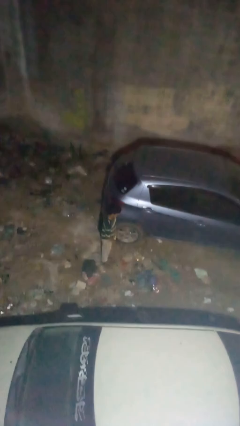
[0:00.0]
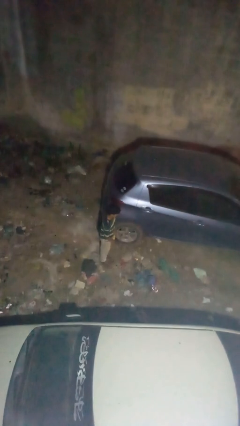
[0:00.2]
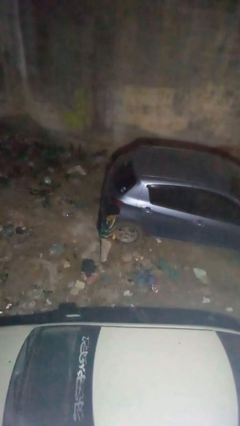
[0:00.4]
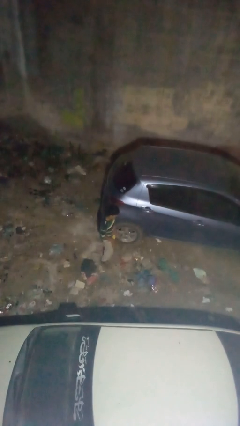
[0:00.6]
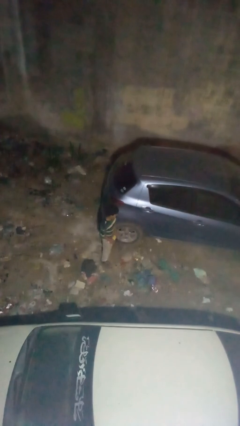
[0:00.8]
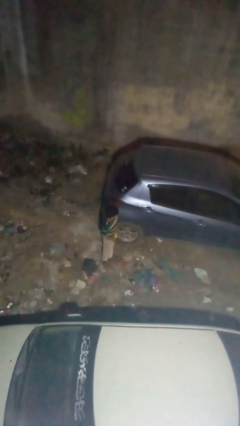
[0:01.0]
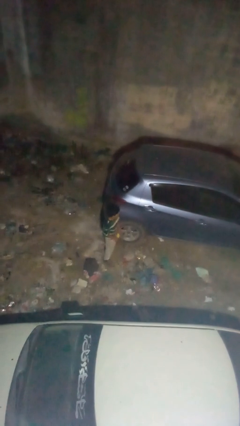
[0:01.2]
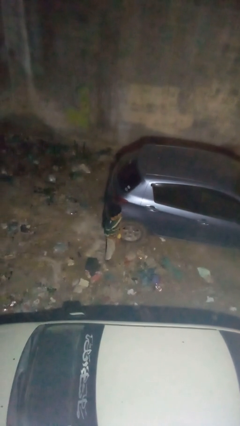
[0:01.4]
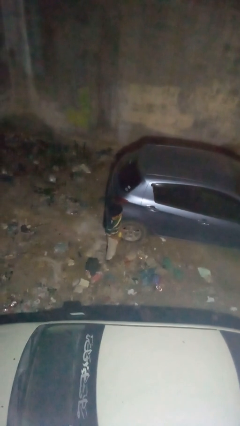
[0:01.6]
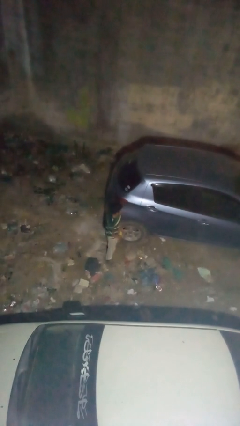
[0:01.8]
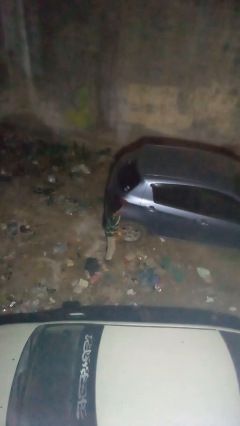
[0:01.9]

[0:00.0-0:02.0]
person kicks car tires

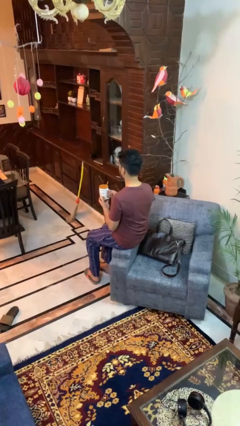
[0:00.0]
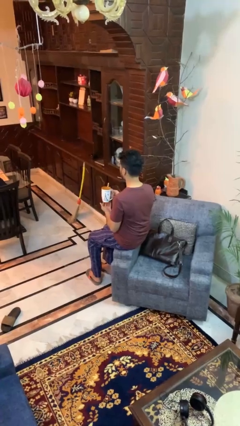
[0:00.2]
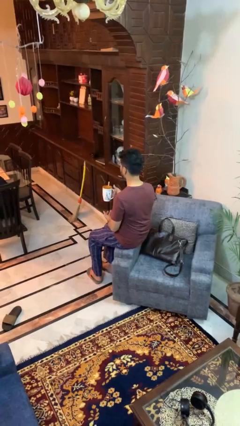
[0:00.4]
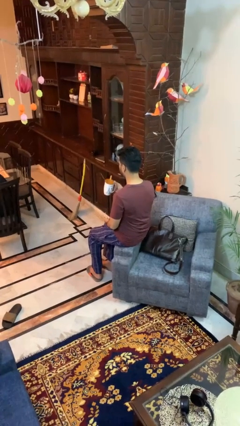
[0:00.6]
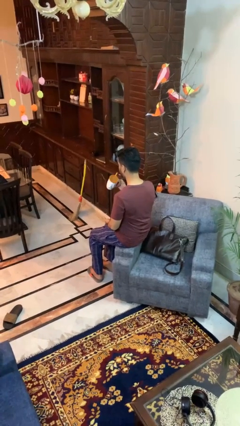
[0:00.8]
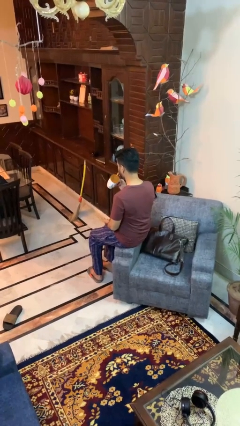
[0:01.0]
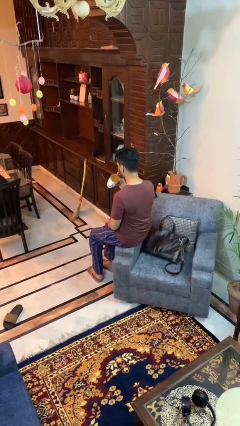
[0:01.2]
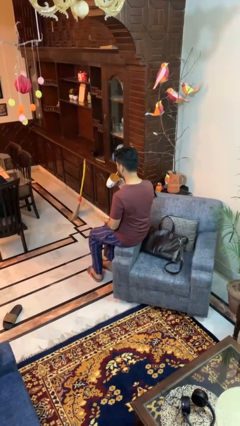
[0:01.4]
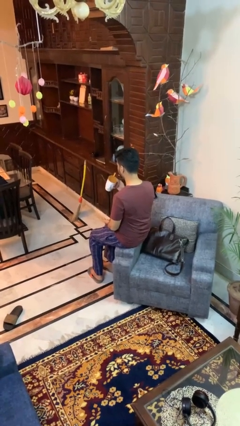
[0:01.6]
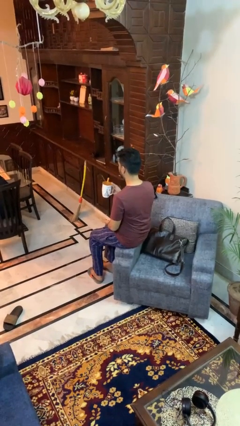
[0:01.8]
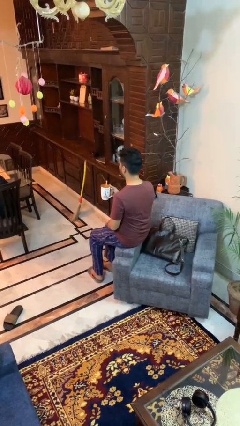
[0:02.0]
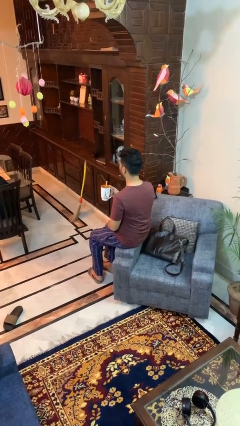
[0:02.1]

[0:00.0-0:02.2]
person drinks from straw

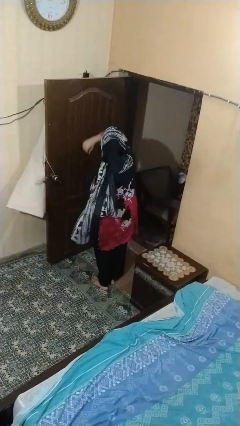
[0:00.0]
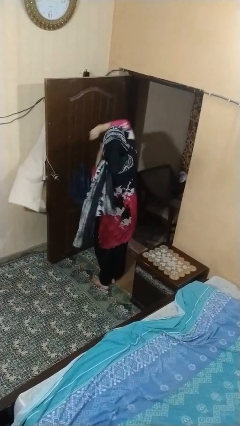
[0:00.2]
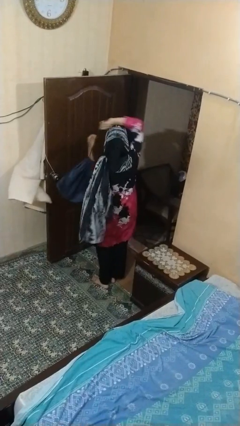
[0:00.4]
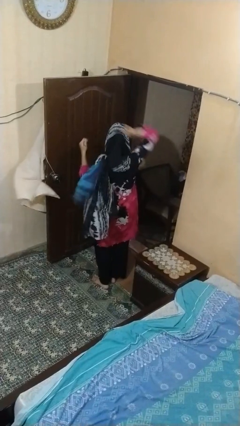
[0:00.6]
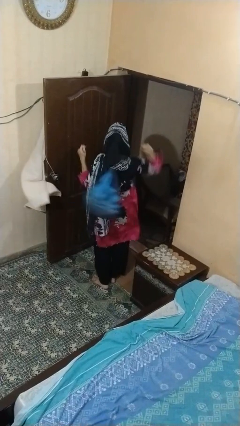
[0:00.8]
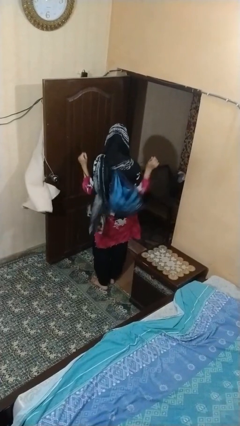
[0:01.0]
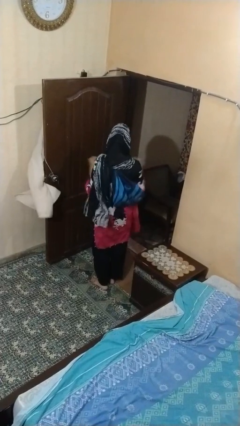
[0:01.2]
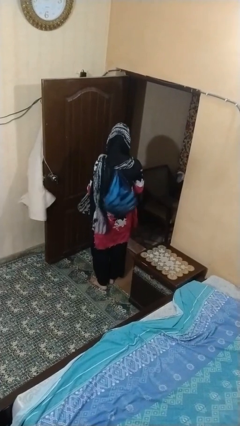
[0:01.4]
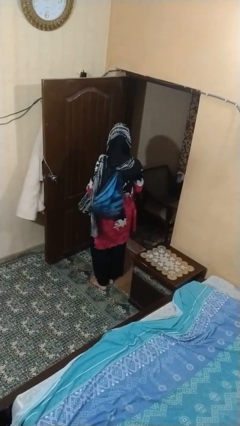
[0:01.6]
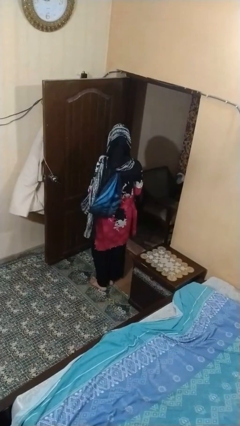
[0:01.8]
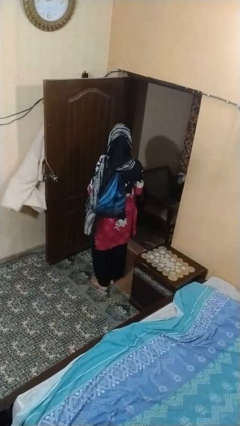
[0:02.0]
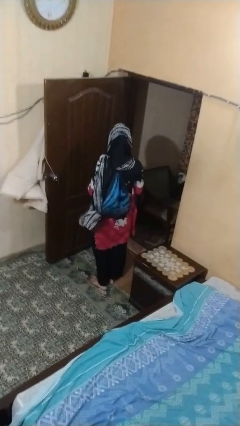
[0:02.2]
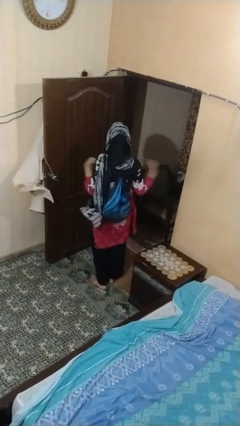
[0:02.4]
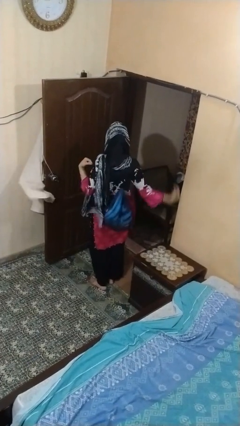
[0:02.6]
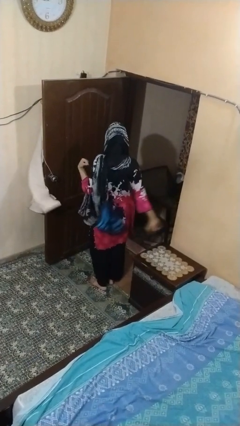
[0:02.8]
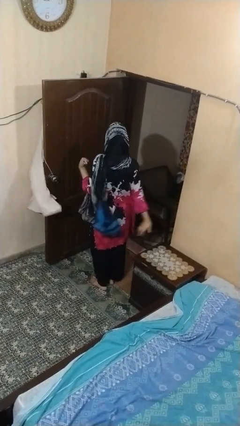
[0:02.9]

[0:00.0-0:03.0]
person puts on backpack

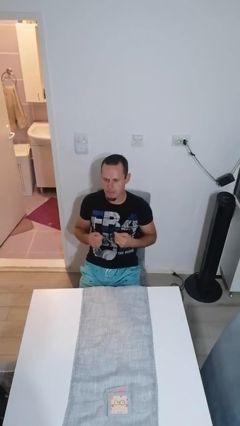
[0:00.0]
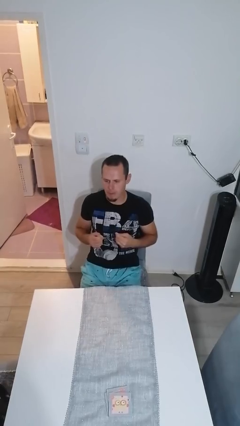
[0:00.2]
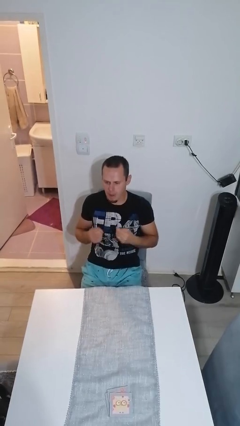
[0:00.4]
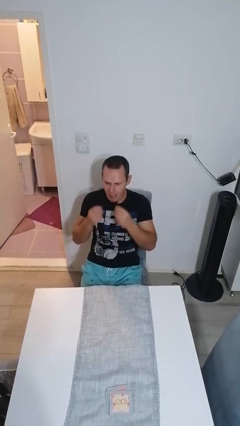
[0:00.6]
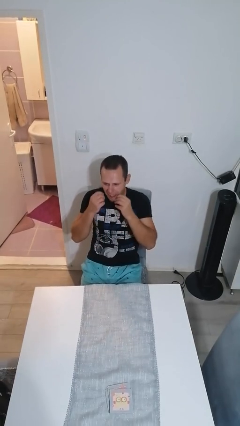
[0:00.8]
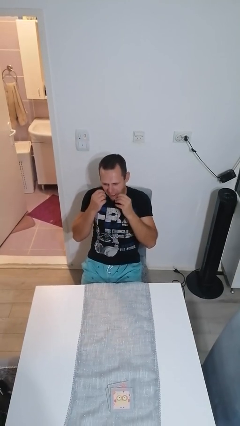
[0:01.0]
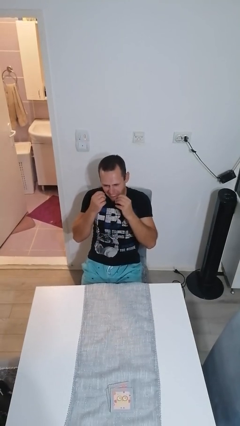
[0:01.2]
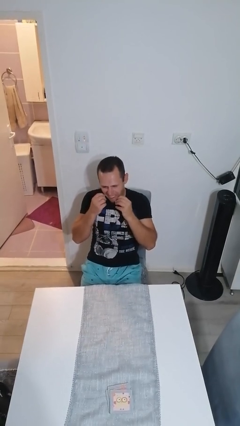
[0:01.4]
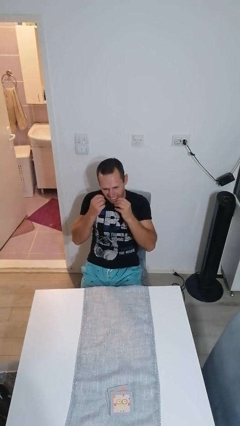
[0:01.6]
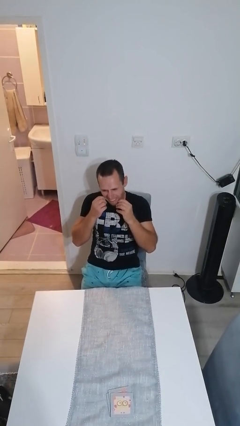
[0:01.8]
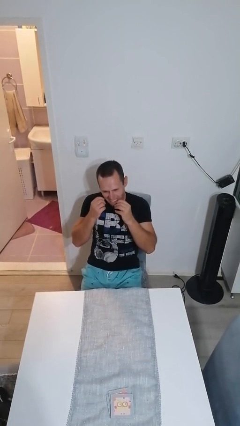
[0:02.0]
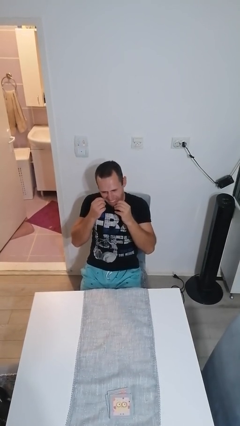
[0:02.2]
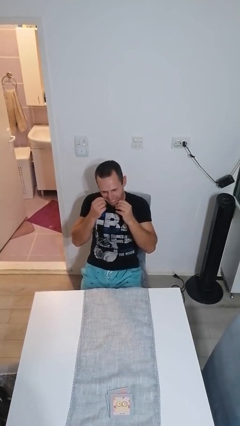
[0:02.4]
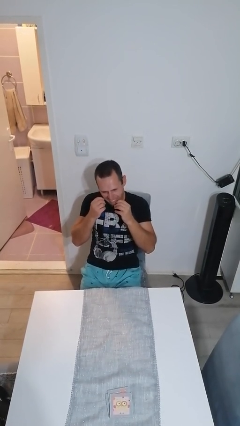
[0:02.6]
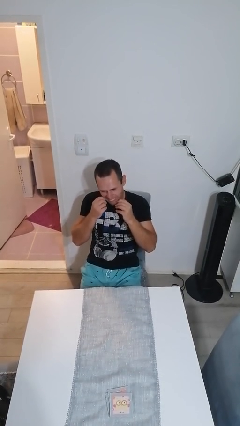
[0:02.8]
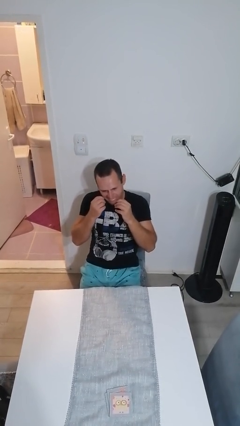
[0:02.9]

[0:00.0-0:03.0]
person flosses

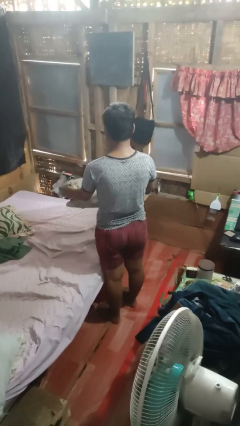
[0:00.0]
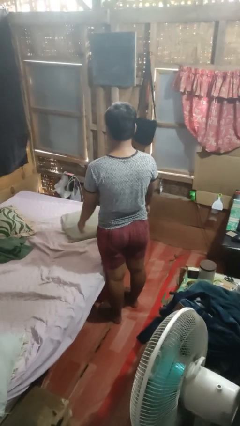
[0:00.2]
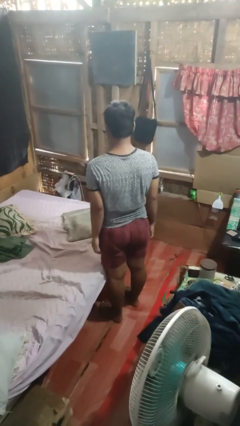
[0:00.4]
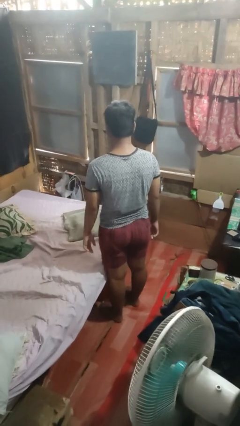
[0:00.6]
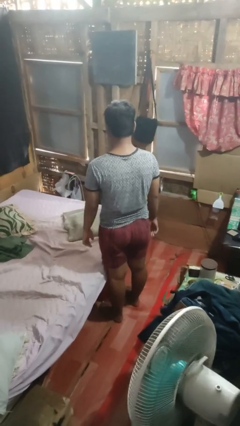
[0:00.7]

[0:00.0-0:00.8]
person puts down object on bed

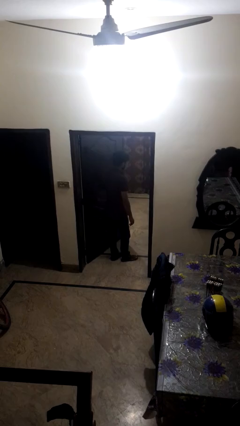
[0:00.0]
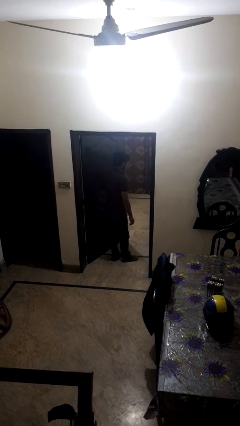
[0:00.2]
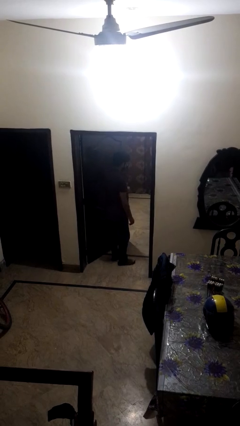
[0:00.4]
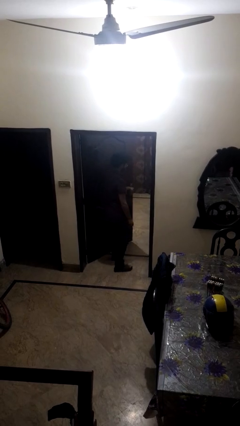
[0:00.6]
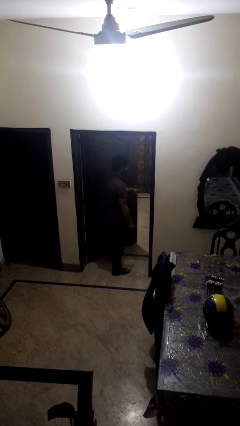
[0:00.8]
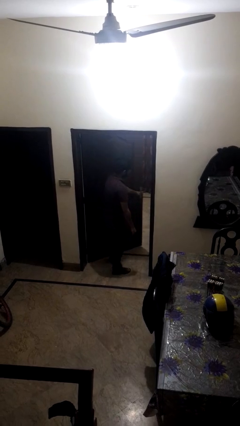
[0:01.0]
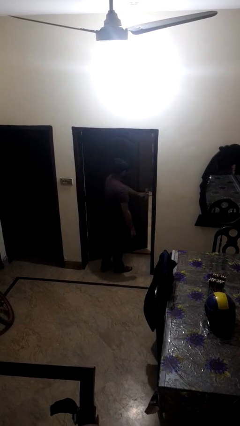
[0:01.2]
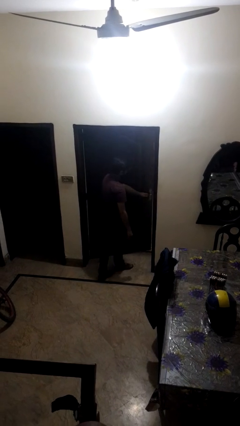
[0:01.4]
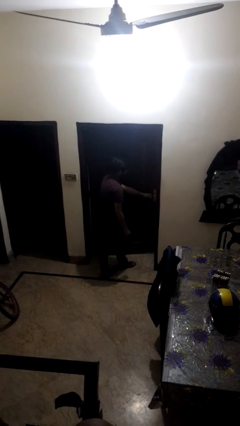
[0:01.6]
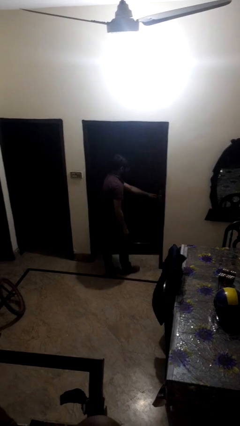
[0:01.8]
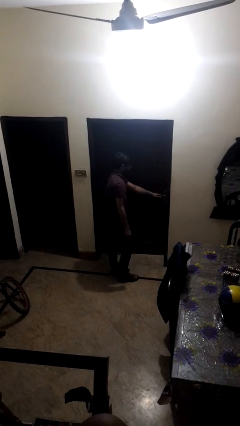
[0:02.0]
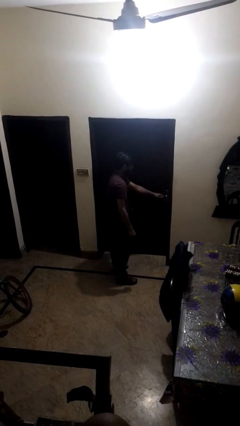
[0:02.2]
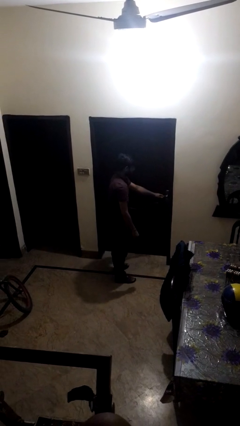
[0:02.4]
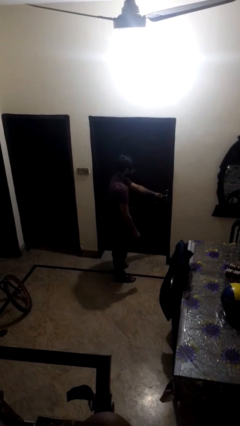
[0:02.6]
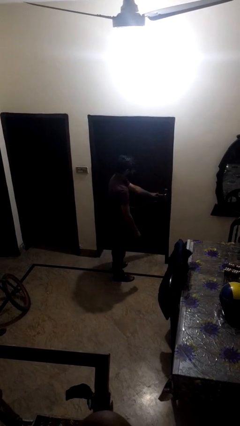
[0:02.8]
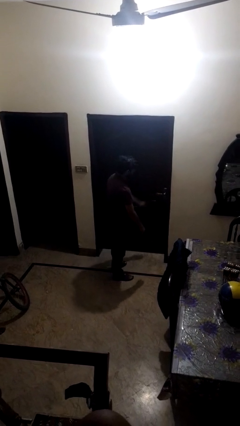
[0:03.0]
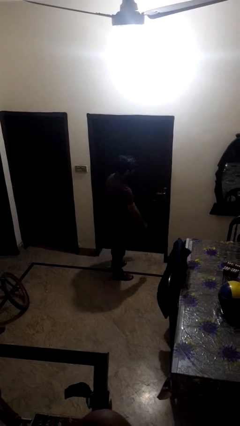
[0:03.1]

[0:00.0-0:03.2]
person closes facility door

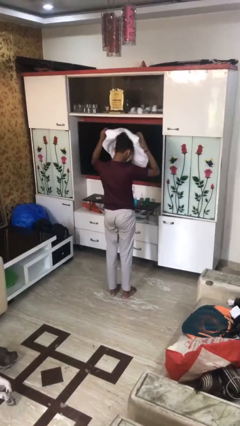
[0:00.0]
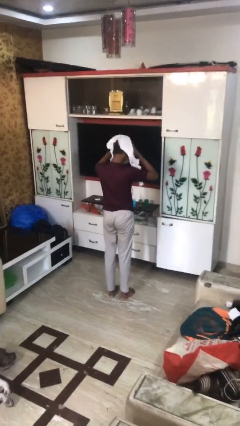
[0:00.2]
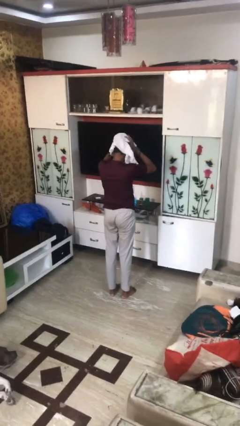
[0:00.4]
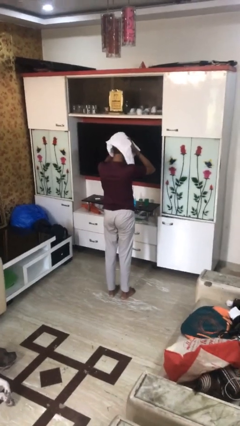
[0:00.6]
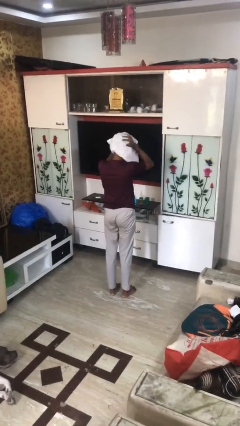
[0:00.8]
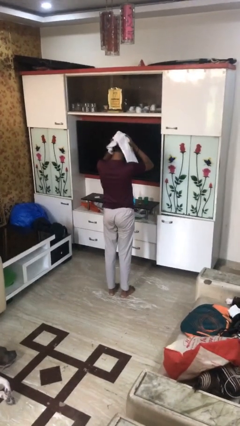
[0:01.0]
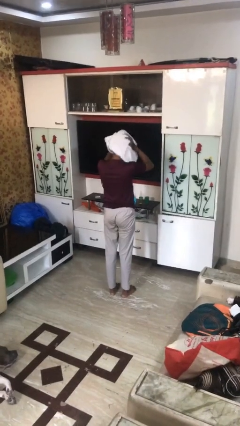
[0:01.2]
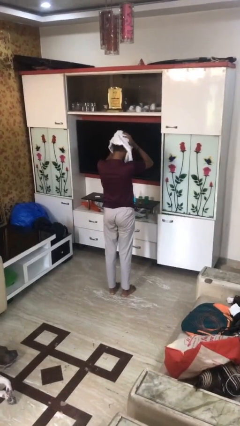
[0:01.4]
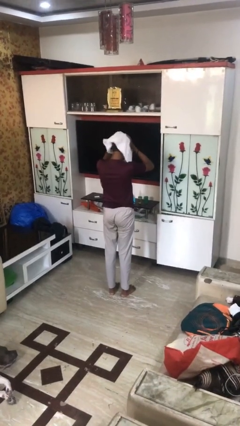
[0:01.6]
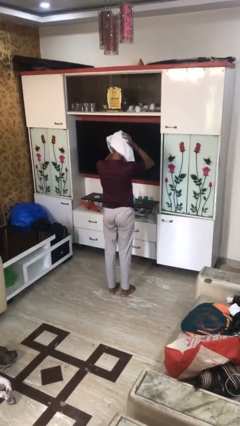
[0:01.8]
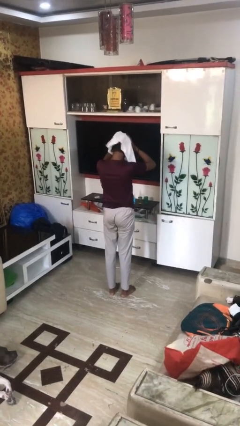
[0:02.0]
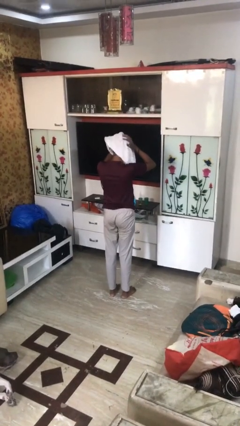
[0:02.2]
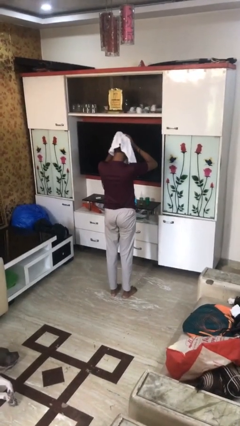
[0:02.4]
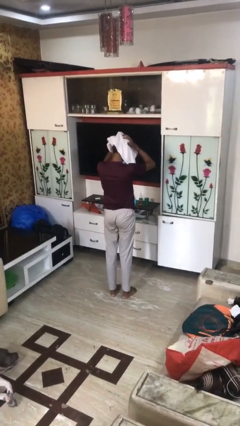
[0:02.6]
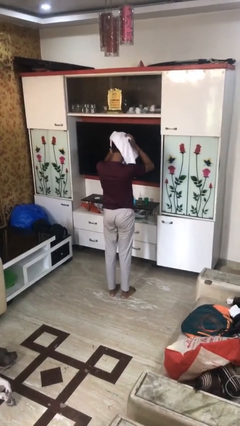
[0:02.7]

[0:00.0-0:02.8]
person dries hair with towel

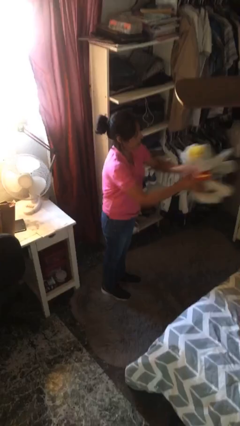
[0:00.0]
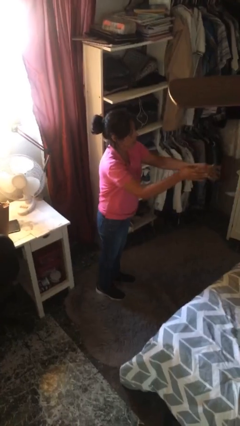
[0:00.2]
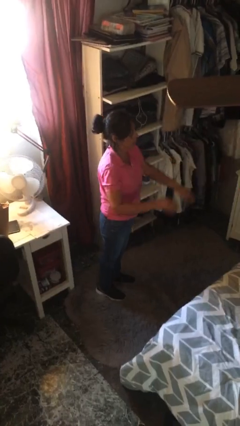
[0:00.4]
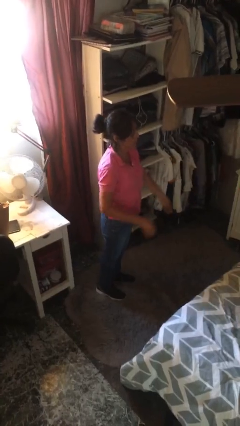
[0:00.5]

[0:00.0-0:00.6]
person throws object on bed
